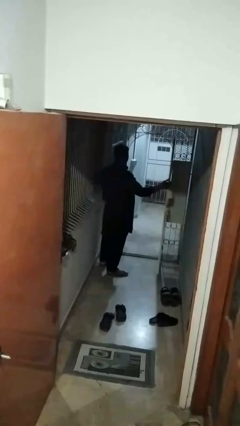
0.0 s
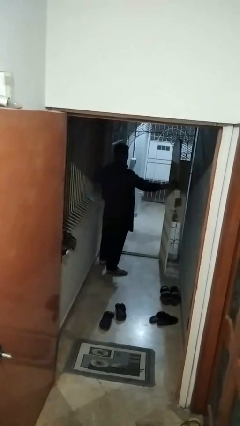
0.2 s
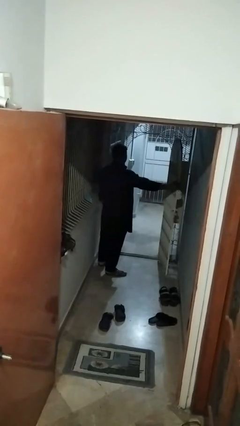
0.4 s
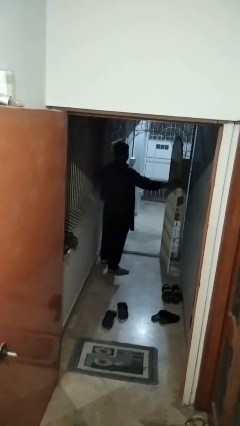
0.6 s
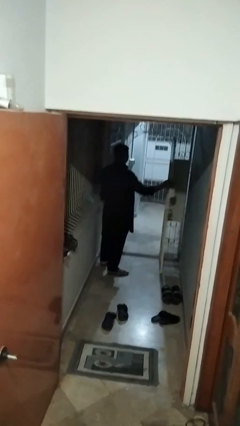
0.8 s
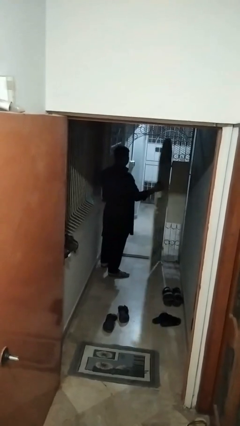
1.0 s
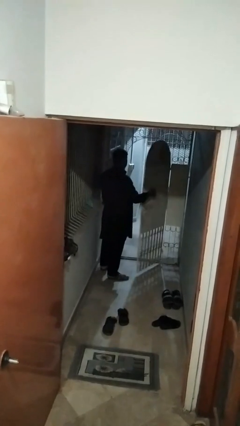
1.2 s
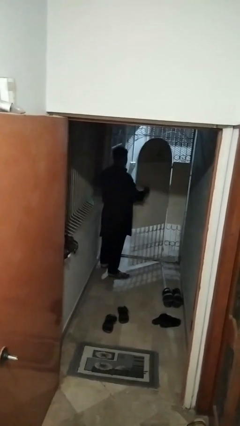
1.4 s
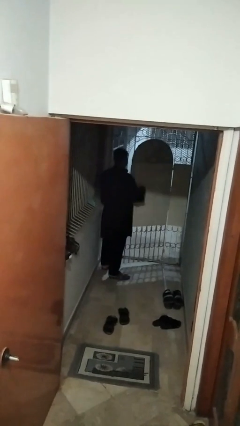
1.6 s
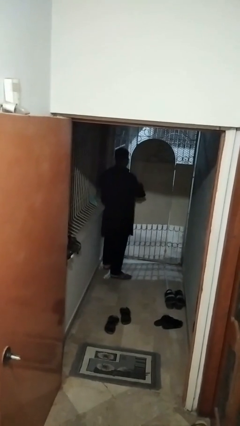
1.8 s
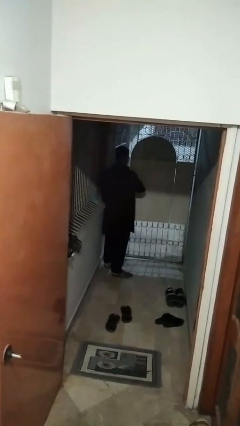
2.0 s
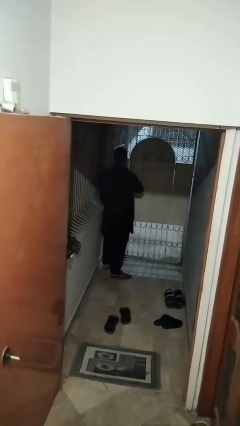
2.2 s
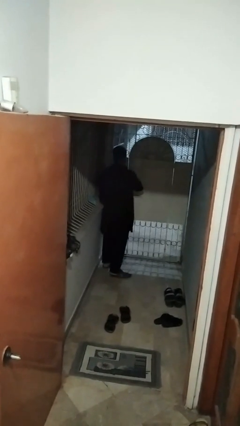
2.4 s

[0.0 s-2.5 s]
person closes gate

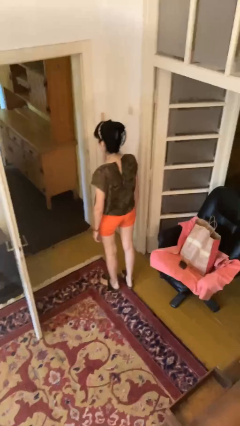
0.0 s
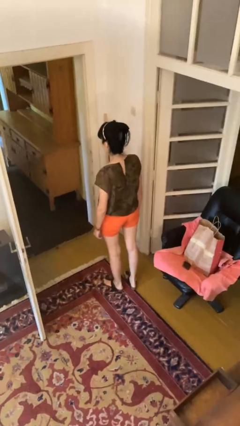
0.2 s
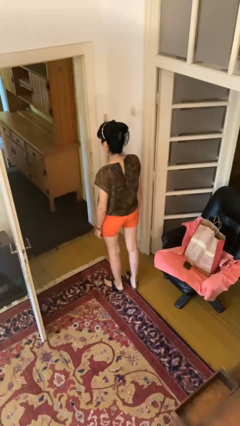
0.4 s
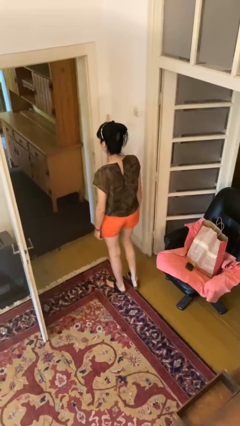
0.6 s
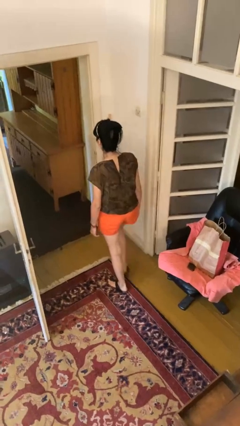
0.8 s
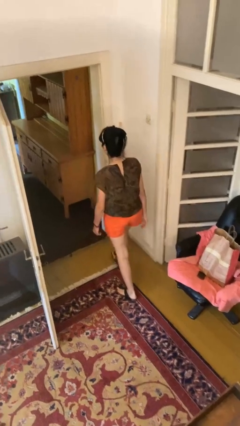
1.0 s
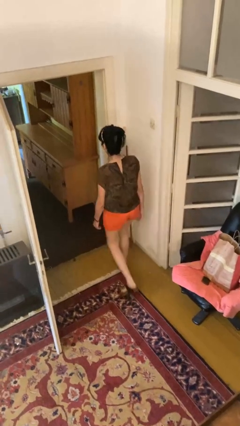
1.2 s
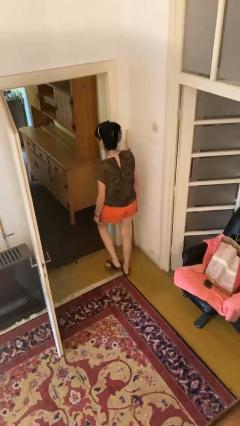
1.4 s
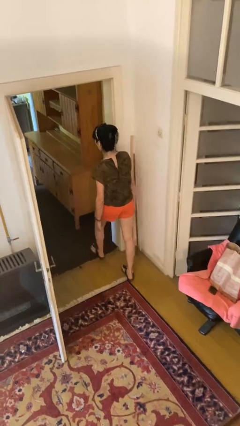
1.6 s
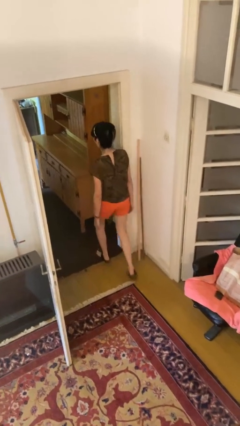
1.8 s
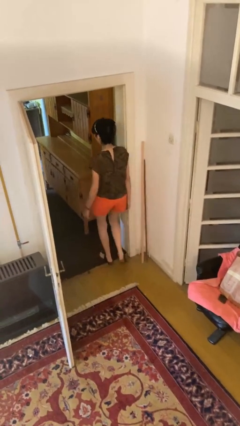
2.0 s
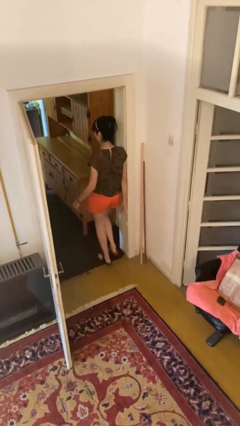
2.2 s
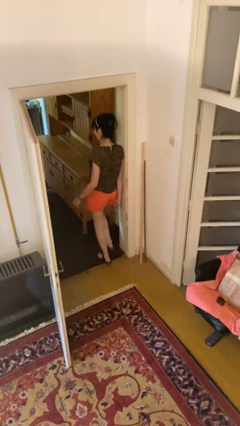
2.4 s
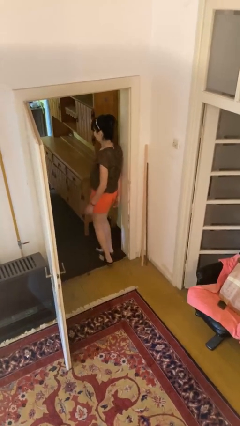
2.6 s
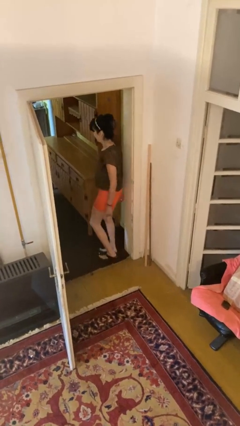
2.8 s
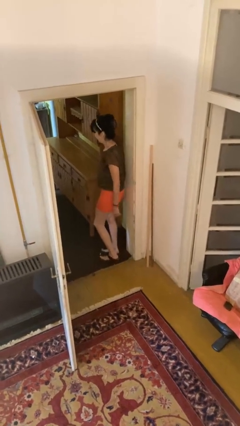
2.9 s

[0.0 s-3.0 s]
person bumps into wall

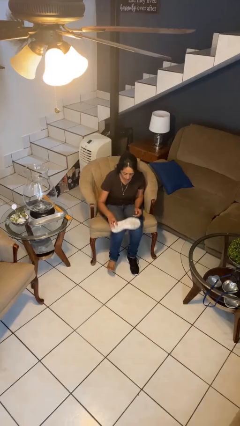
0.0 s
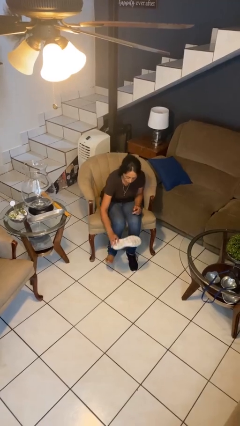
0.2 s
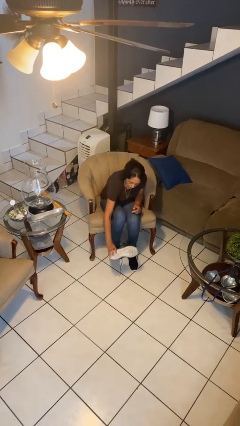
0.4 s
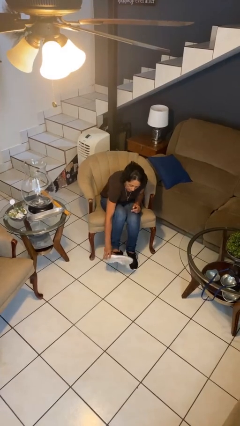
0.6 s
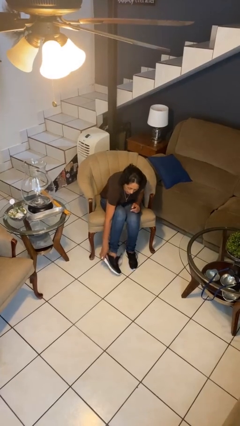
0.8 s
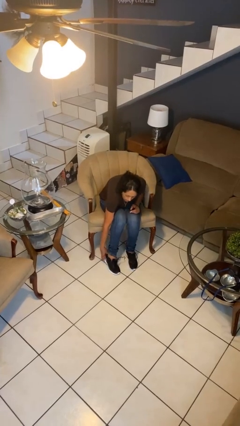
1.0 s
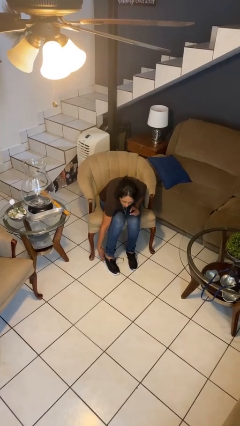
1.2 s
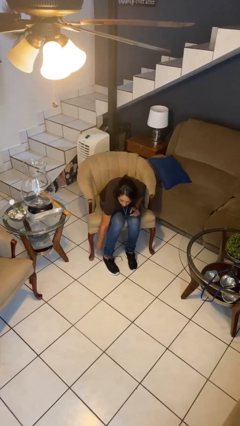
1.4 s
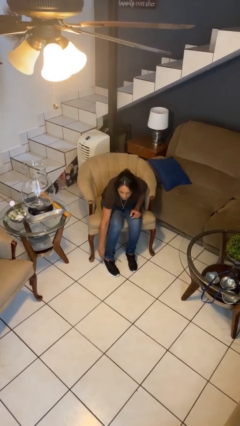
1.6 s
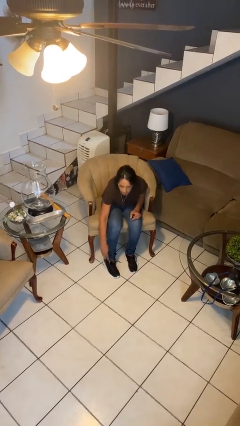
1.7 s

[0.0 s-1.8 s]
person puts on shoes

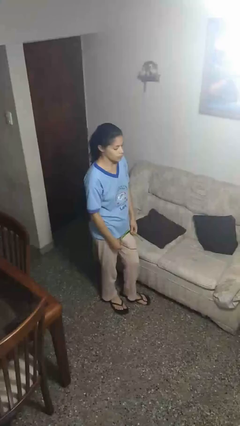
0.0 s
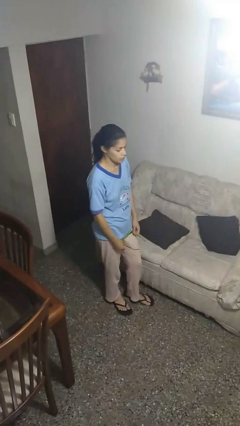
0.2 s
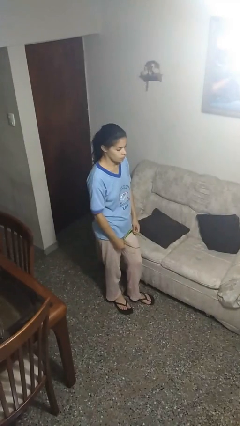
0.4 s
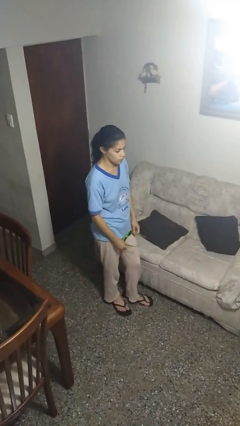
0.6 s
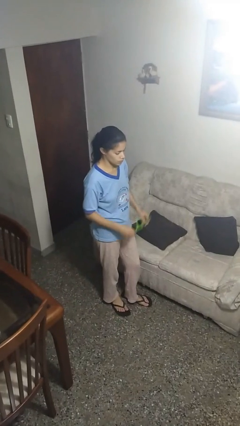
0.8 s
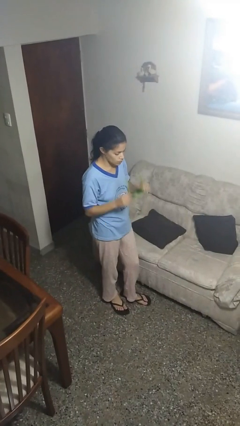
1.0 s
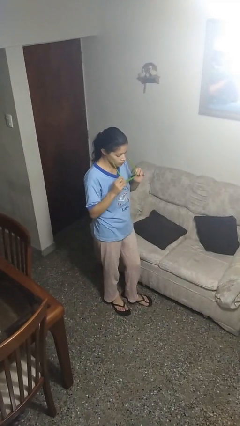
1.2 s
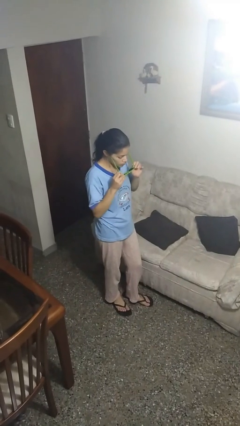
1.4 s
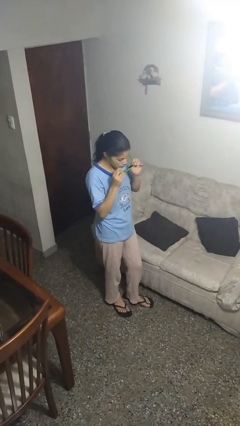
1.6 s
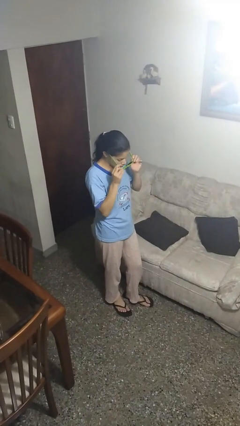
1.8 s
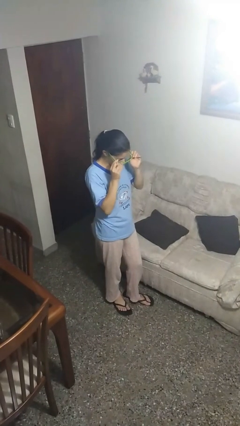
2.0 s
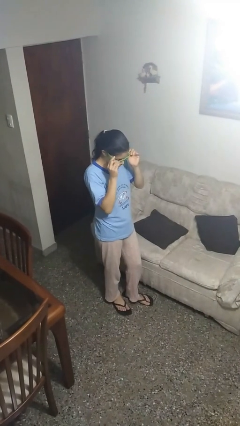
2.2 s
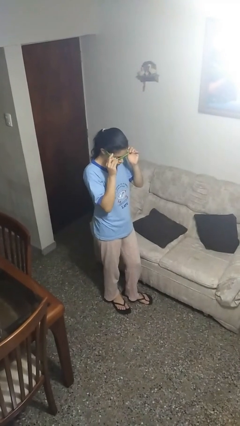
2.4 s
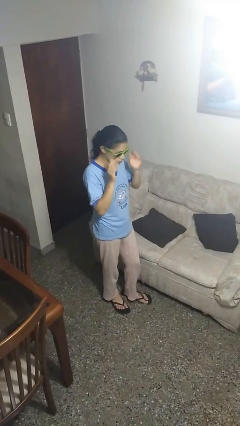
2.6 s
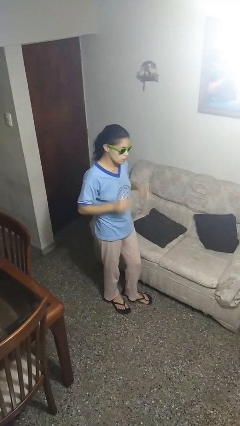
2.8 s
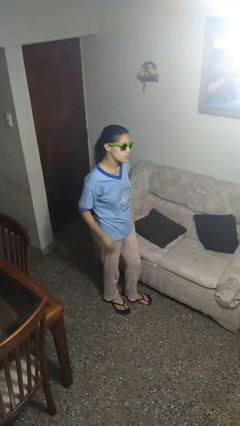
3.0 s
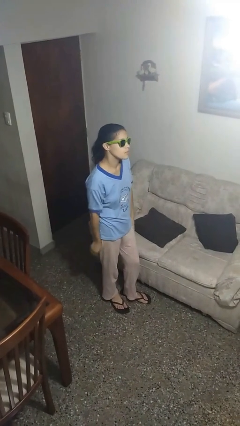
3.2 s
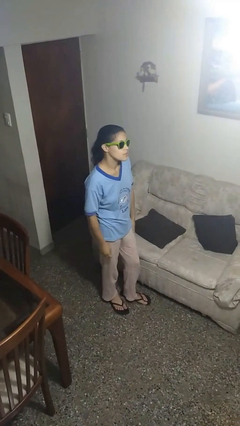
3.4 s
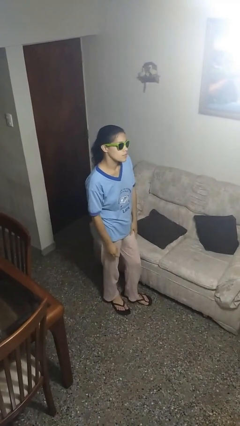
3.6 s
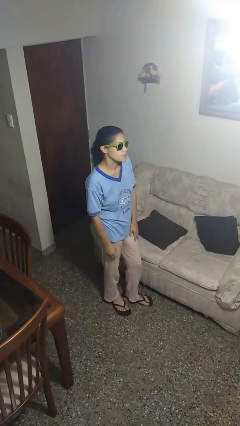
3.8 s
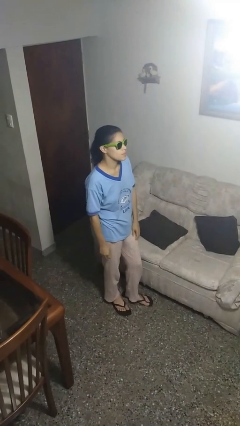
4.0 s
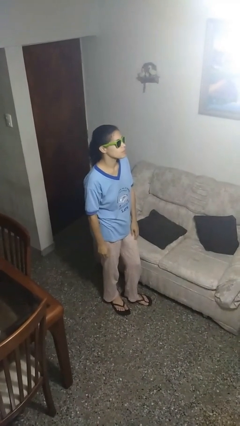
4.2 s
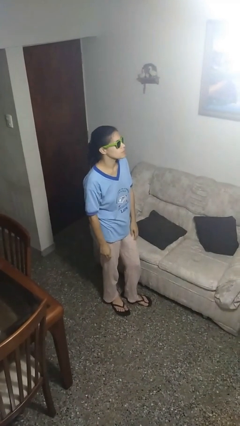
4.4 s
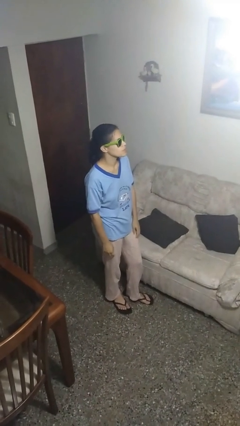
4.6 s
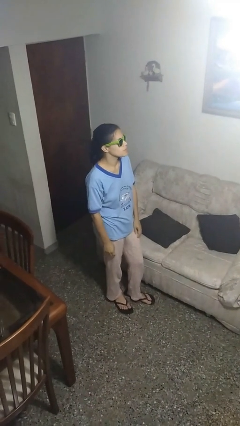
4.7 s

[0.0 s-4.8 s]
person puts on sunglasses

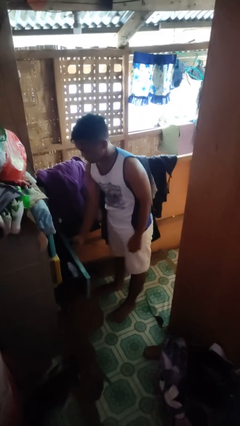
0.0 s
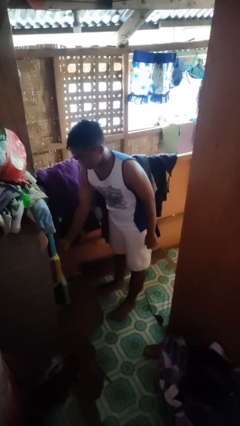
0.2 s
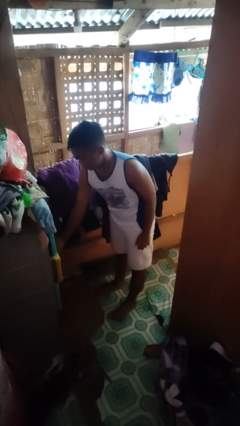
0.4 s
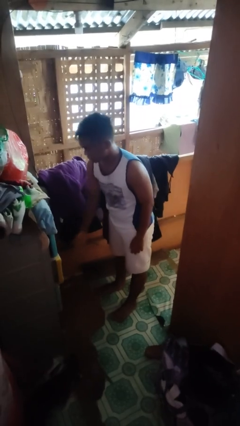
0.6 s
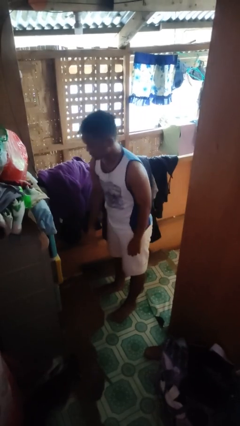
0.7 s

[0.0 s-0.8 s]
person closes dresser drawer

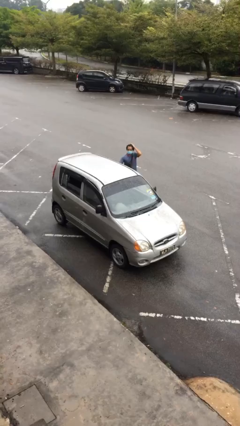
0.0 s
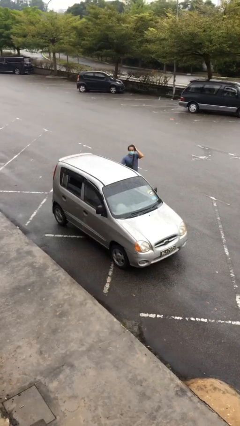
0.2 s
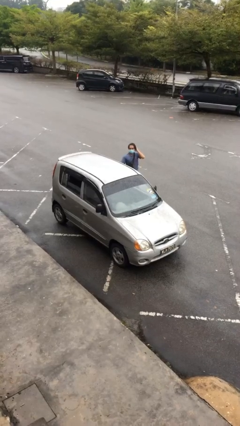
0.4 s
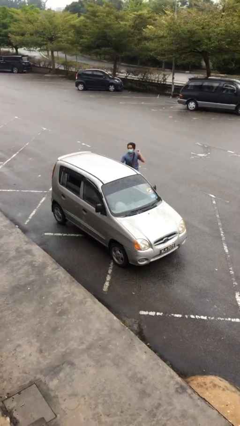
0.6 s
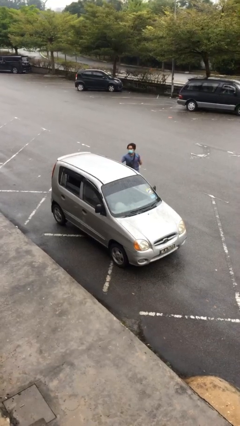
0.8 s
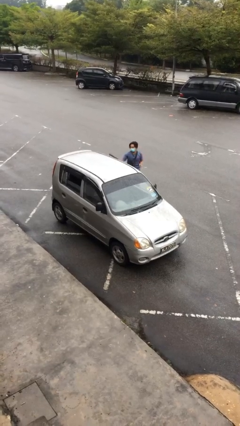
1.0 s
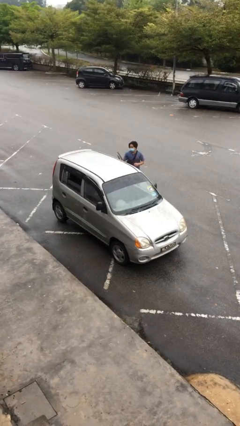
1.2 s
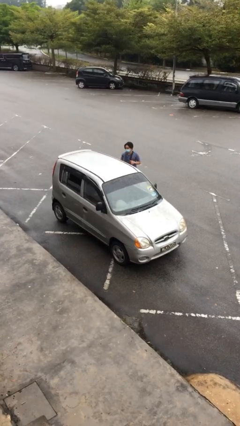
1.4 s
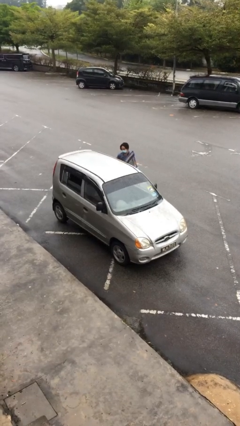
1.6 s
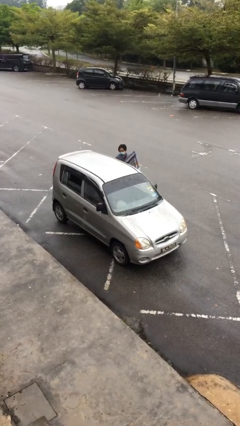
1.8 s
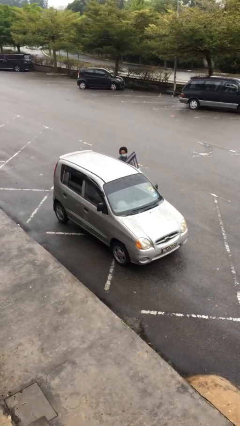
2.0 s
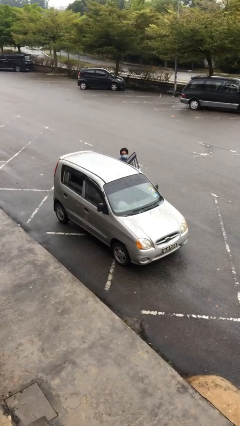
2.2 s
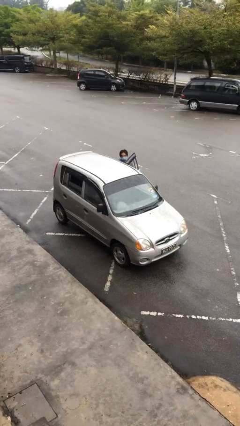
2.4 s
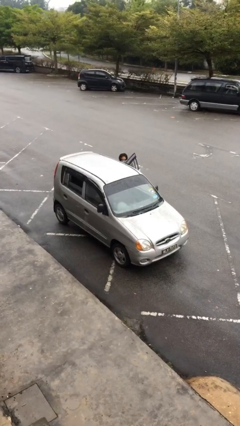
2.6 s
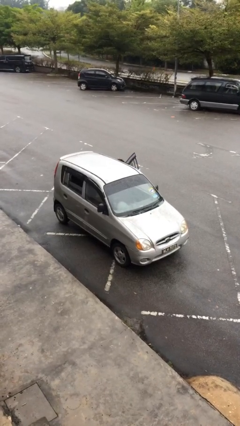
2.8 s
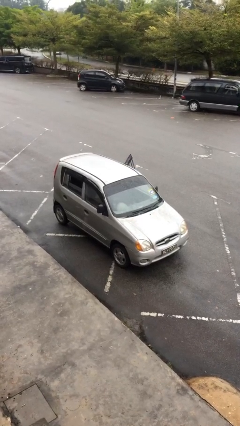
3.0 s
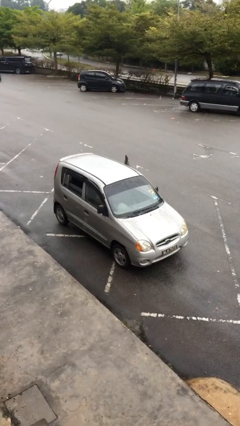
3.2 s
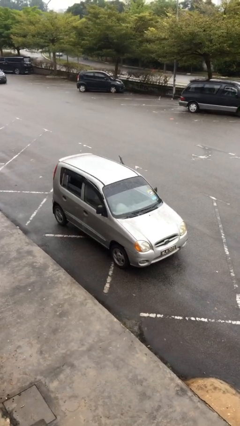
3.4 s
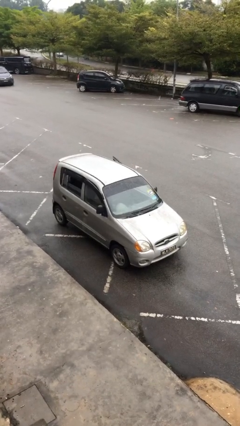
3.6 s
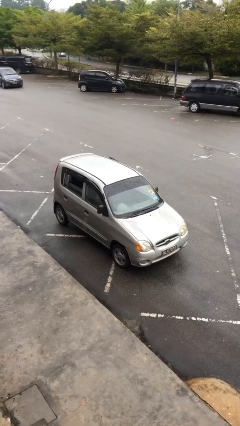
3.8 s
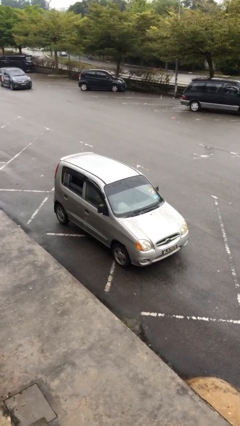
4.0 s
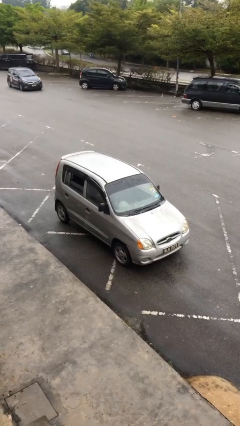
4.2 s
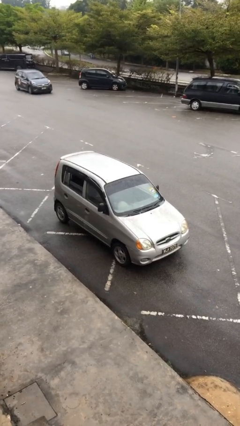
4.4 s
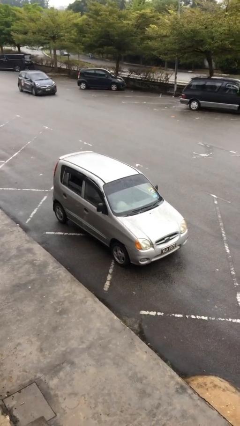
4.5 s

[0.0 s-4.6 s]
car picks up person
